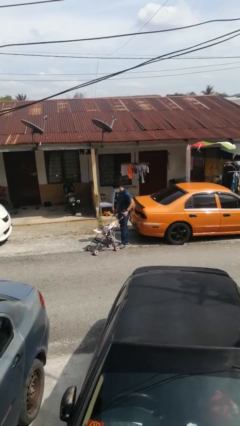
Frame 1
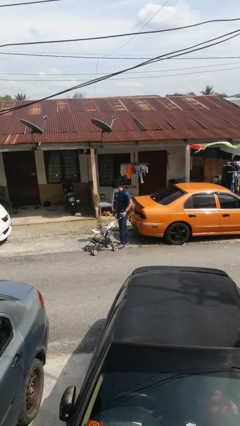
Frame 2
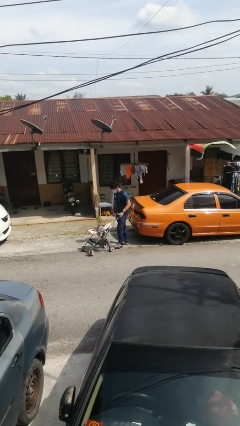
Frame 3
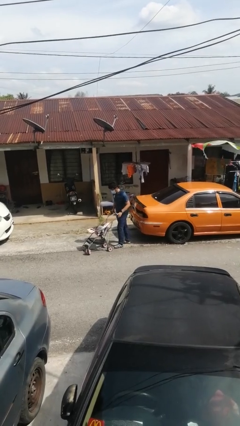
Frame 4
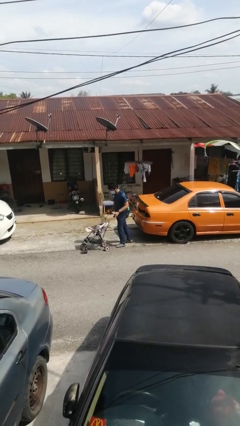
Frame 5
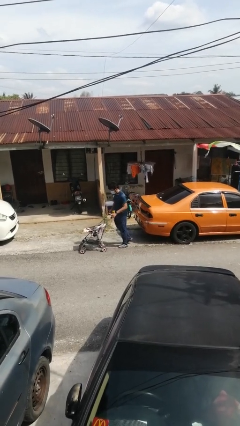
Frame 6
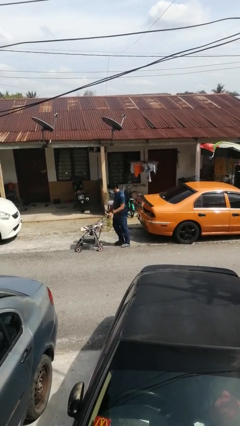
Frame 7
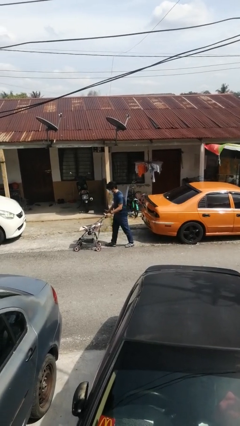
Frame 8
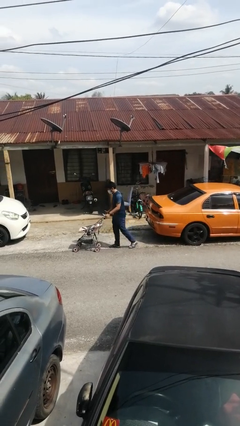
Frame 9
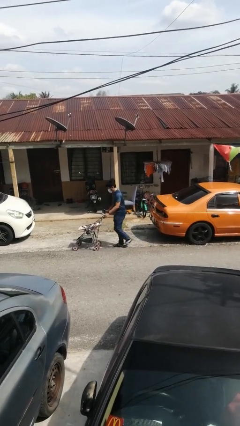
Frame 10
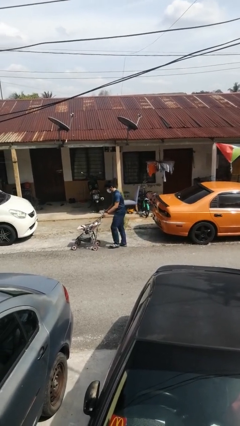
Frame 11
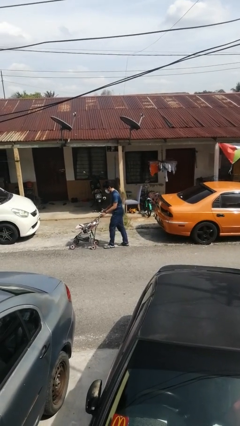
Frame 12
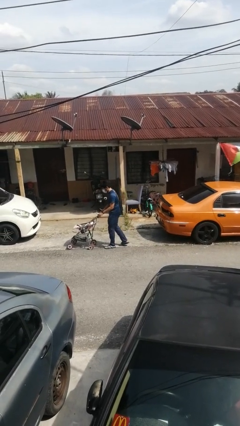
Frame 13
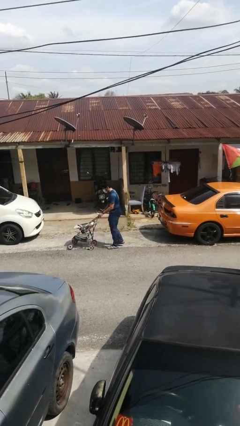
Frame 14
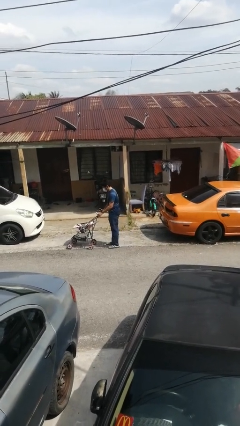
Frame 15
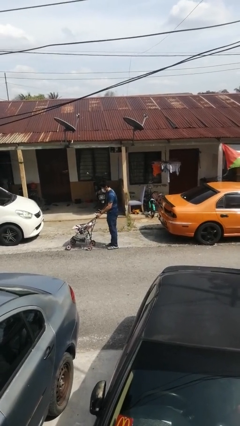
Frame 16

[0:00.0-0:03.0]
person pushes wheeled cart

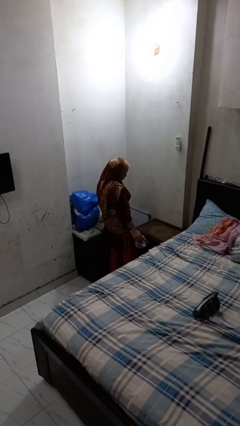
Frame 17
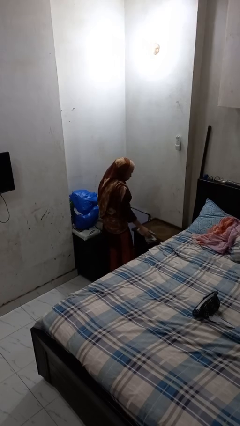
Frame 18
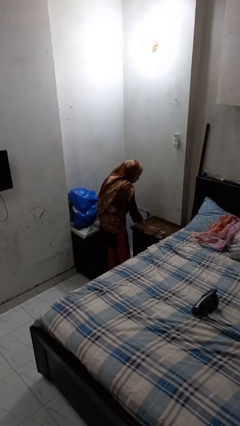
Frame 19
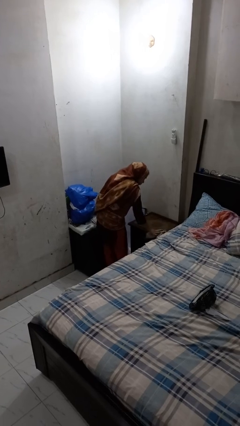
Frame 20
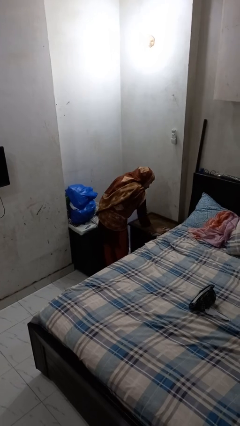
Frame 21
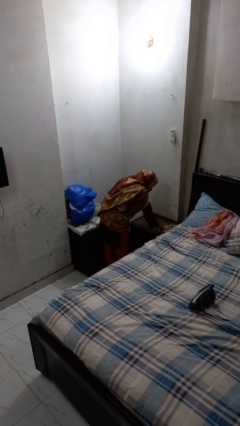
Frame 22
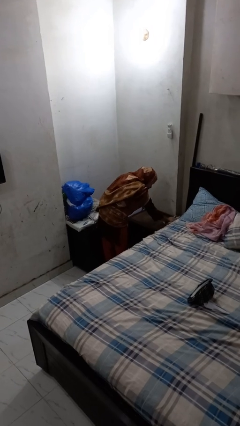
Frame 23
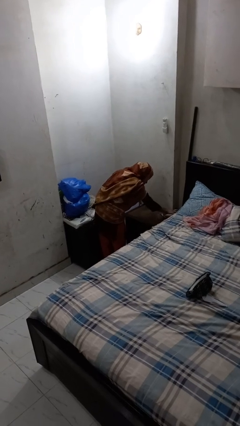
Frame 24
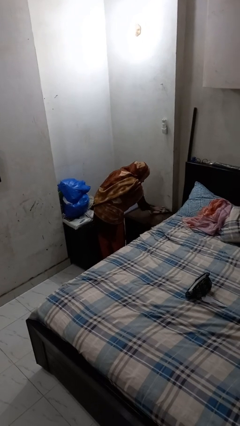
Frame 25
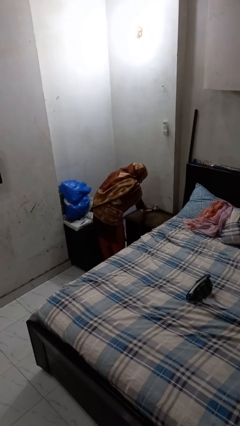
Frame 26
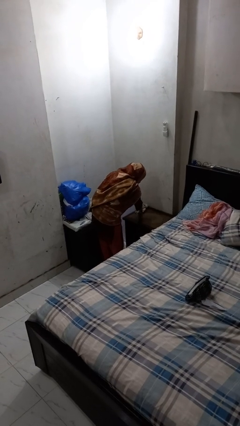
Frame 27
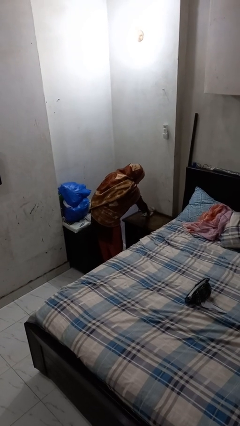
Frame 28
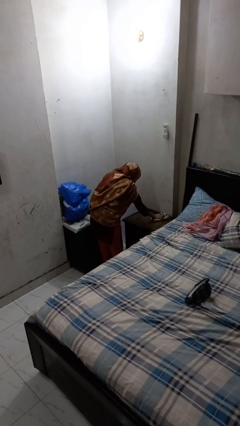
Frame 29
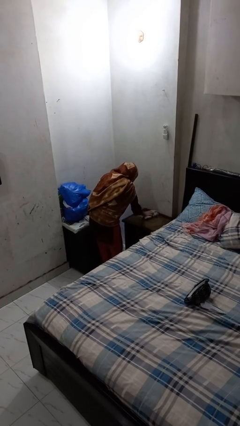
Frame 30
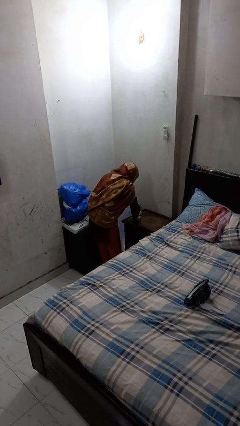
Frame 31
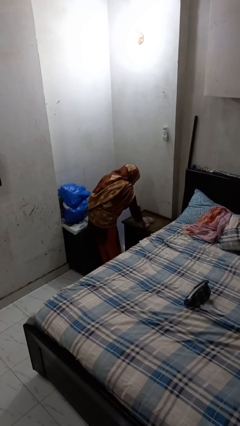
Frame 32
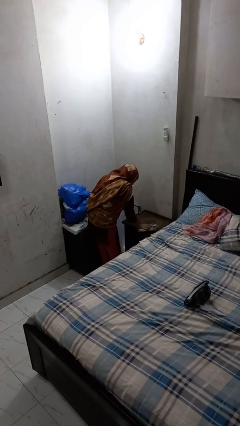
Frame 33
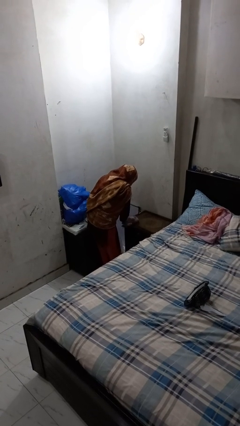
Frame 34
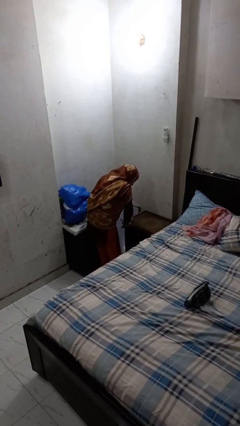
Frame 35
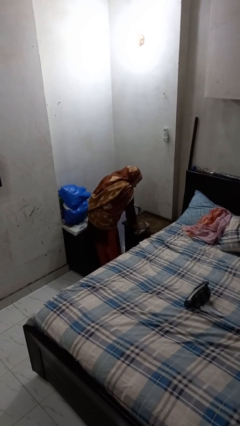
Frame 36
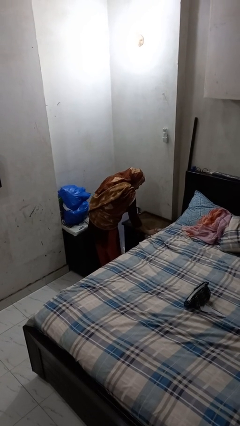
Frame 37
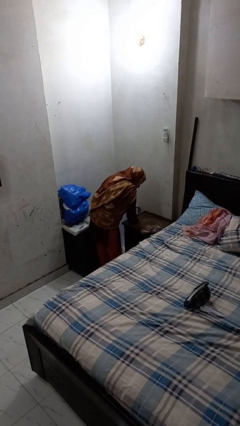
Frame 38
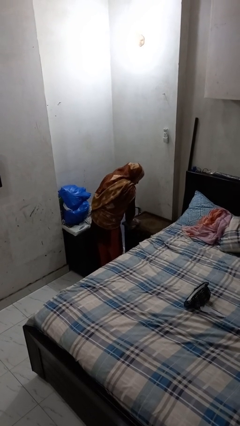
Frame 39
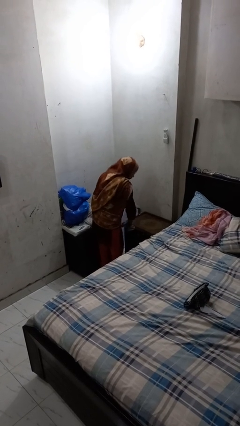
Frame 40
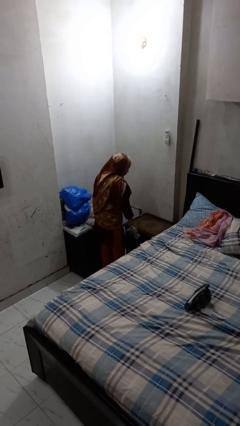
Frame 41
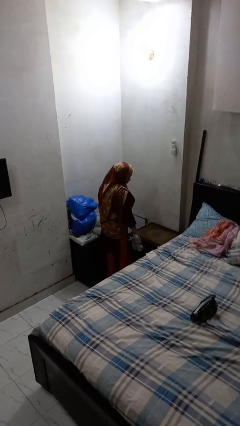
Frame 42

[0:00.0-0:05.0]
person cleans table with rag

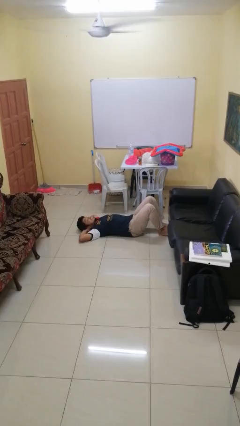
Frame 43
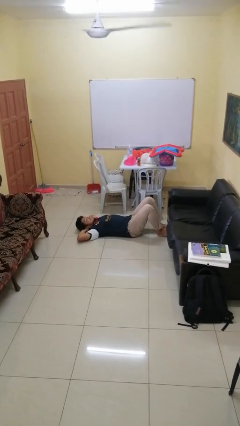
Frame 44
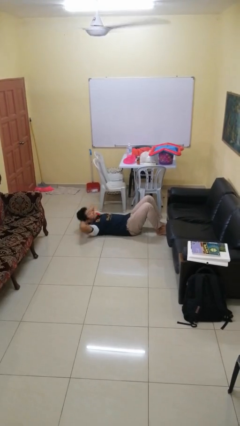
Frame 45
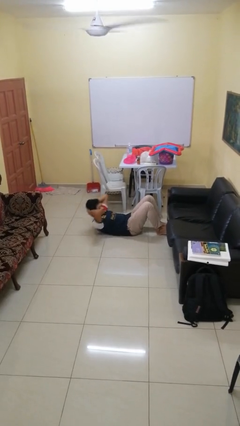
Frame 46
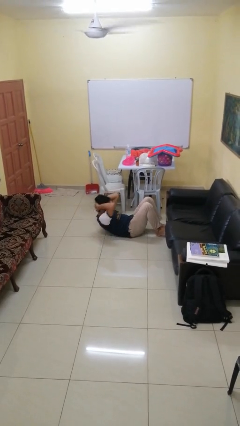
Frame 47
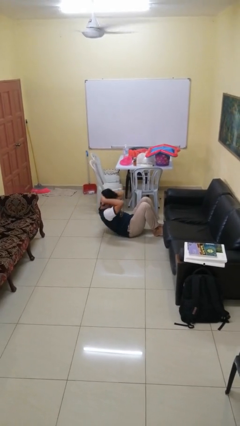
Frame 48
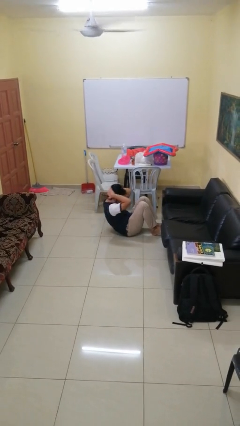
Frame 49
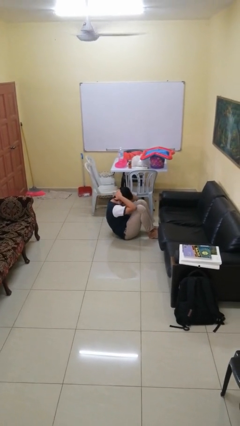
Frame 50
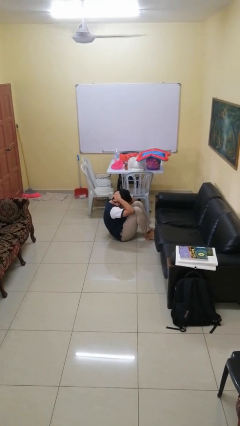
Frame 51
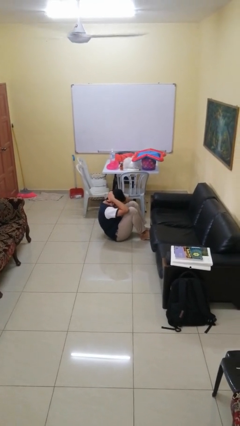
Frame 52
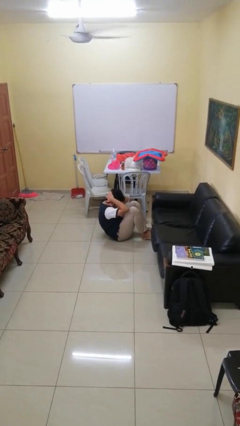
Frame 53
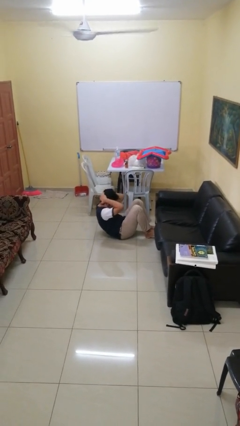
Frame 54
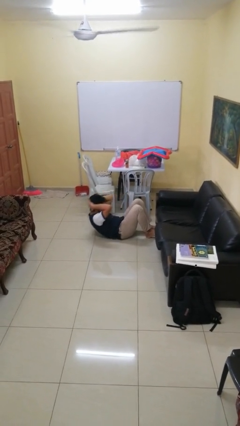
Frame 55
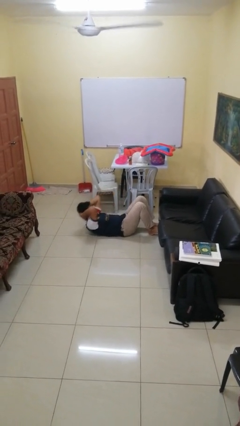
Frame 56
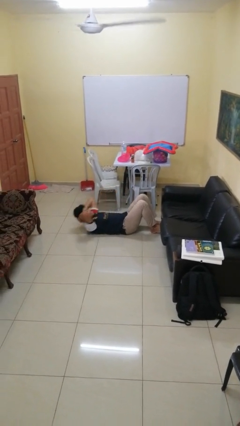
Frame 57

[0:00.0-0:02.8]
person exercises with situp

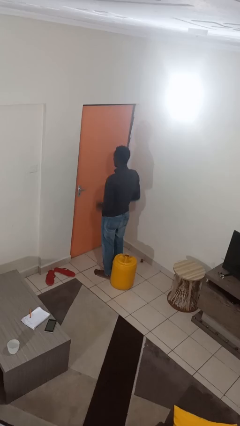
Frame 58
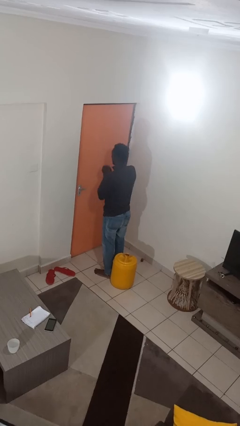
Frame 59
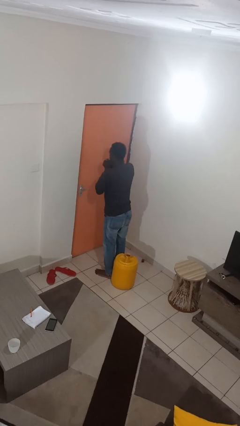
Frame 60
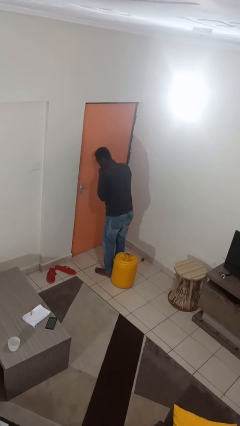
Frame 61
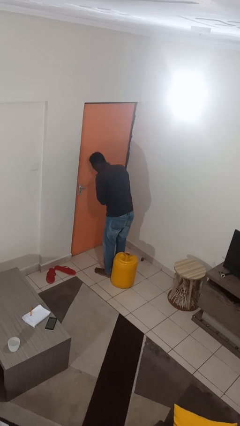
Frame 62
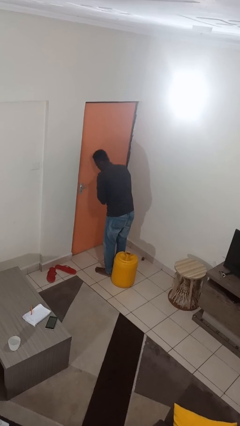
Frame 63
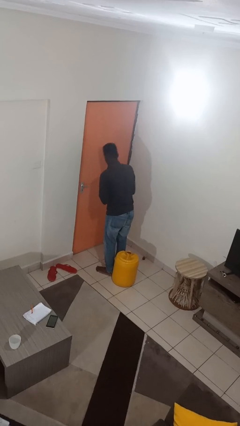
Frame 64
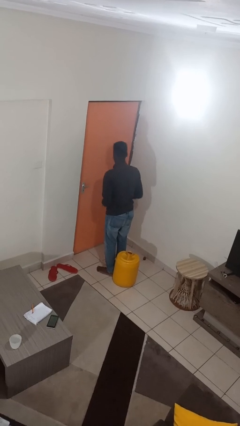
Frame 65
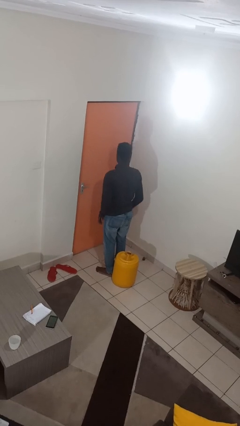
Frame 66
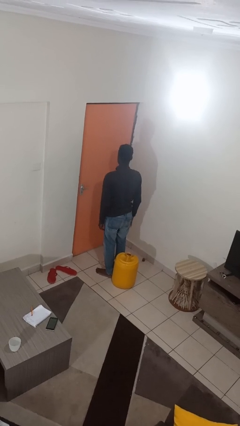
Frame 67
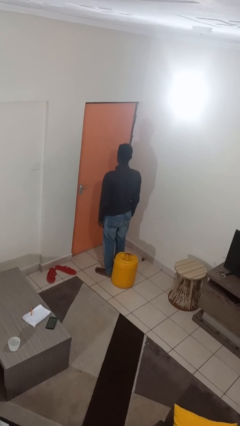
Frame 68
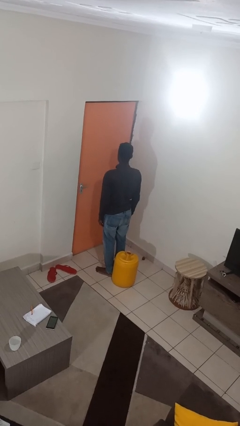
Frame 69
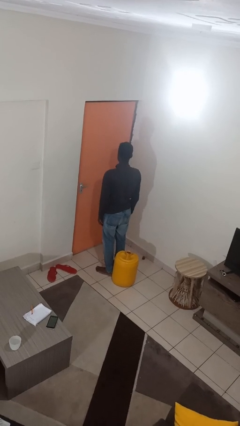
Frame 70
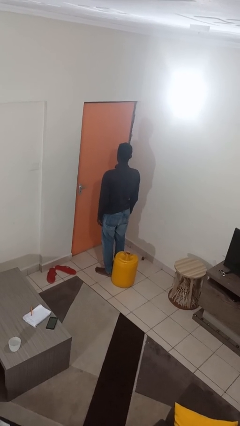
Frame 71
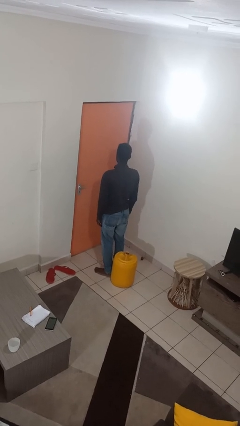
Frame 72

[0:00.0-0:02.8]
person sneezes into hand

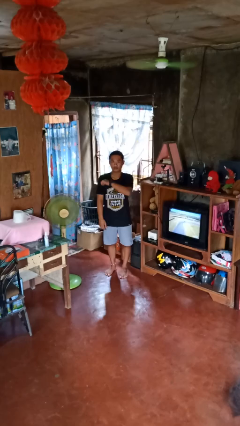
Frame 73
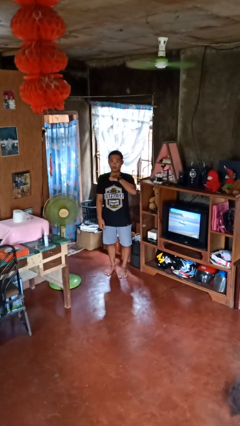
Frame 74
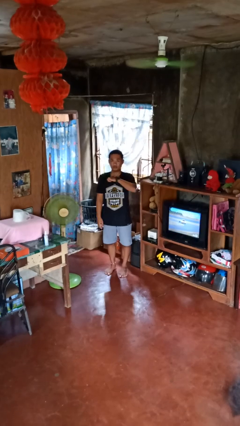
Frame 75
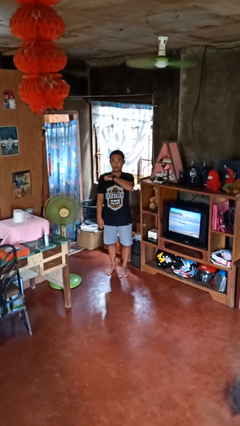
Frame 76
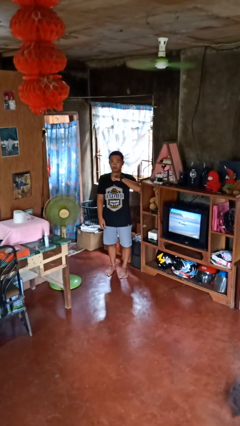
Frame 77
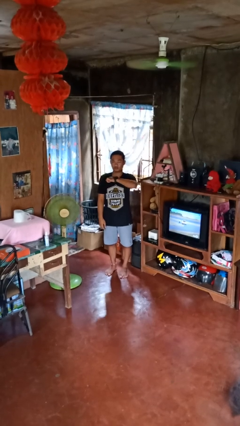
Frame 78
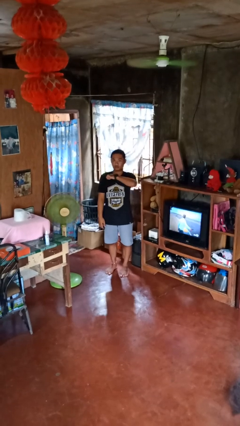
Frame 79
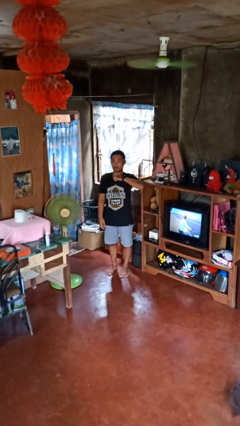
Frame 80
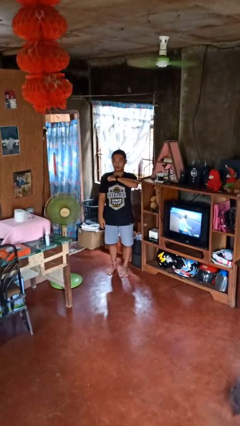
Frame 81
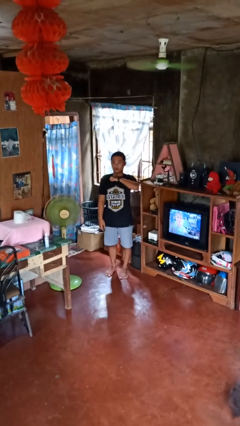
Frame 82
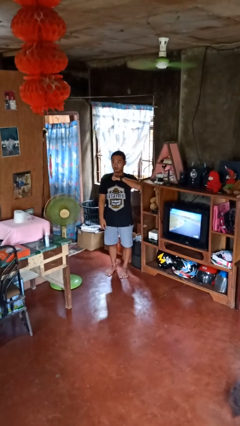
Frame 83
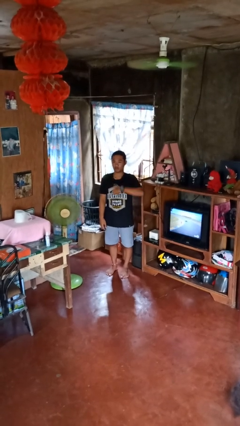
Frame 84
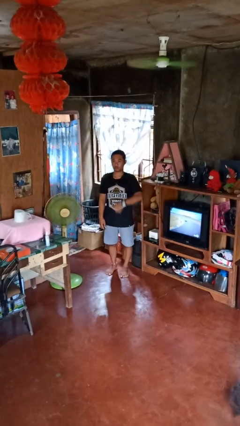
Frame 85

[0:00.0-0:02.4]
person gestures cut

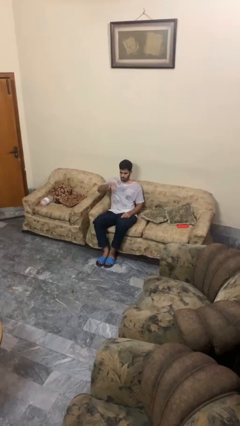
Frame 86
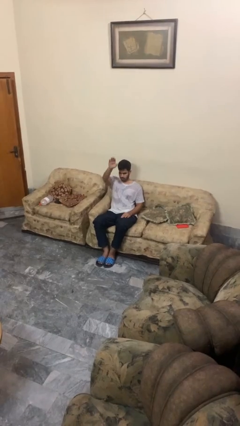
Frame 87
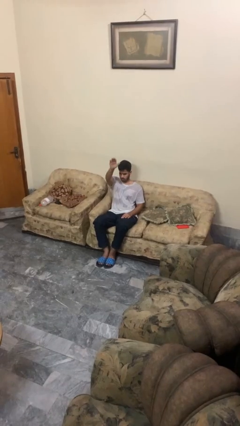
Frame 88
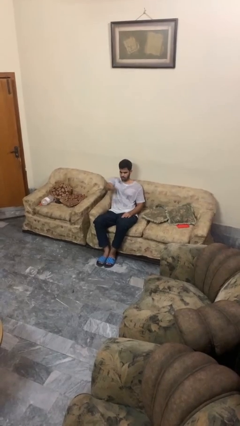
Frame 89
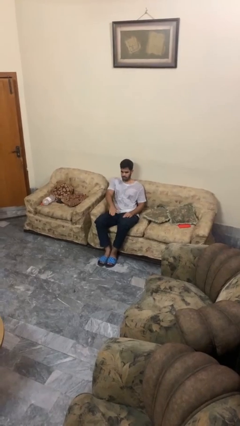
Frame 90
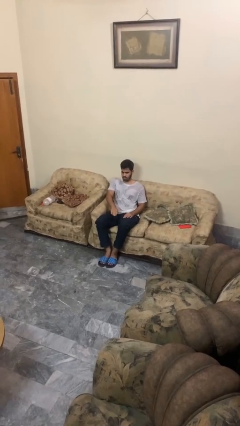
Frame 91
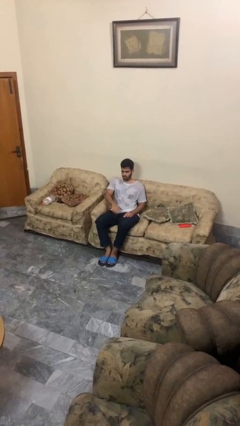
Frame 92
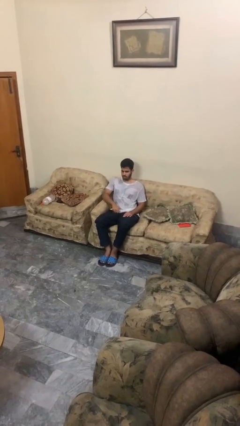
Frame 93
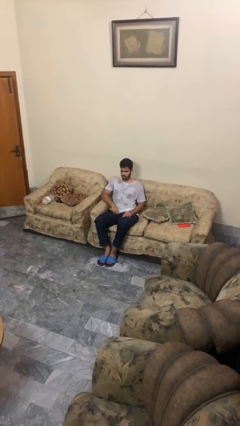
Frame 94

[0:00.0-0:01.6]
person gestures swipe down
